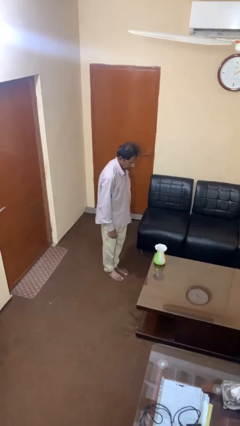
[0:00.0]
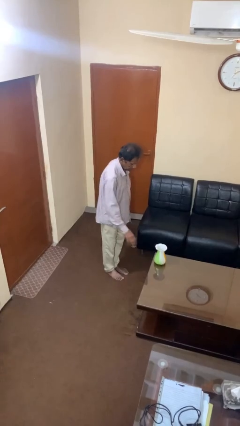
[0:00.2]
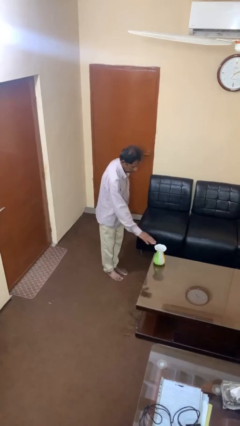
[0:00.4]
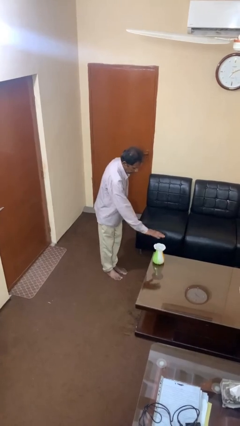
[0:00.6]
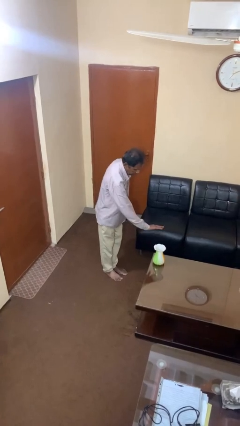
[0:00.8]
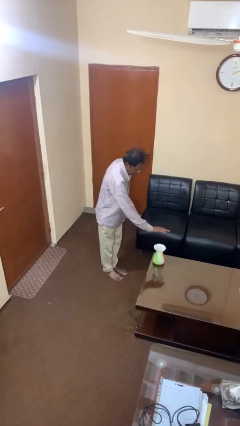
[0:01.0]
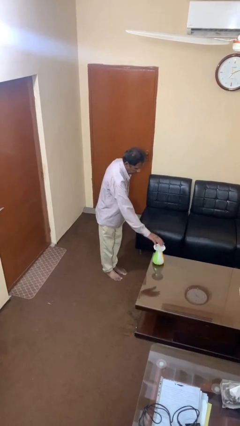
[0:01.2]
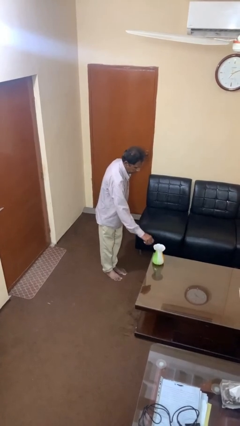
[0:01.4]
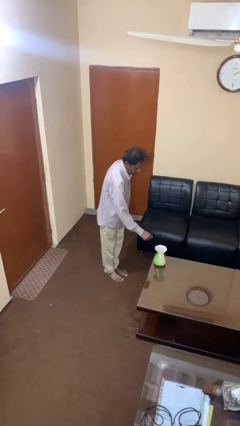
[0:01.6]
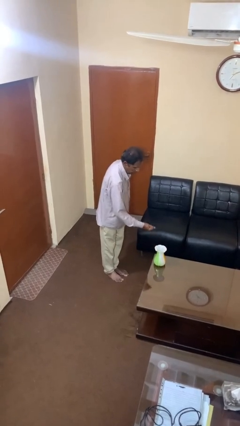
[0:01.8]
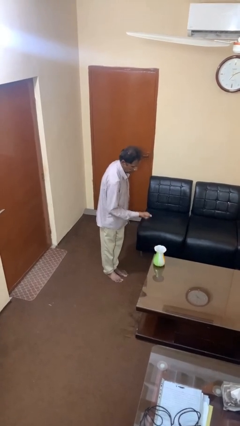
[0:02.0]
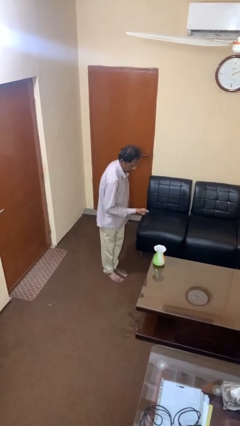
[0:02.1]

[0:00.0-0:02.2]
person waves hand over object

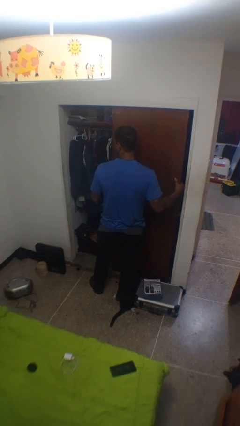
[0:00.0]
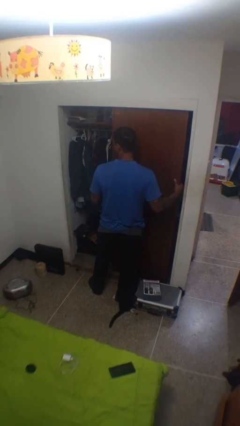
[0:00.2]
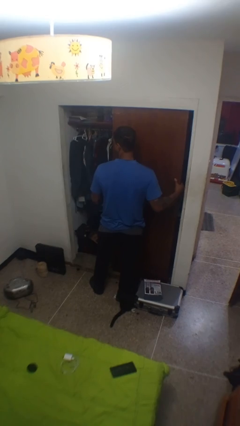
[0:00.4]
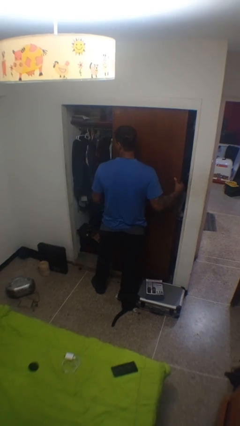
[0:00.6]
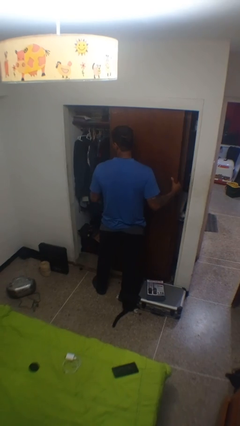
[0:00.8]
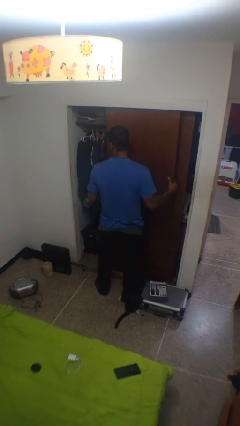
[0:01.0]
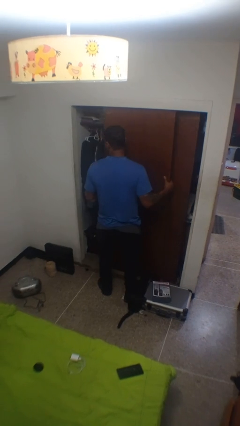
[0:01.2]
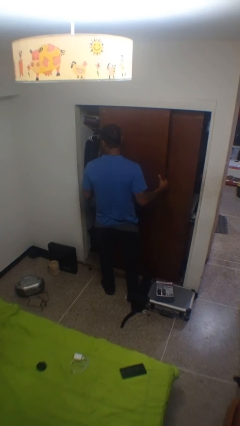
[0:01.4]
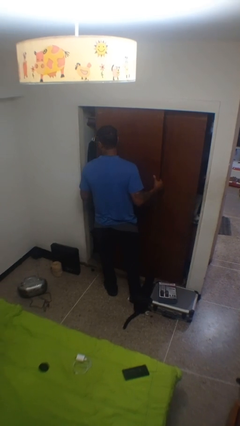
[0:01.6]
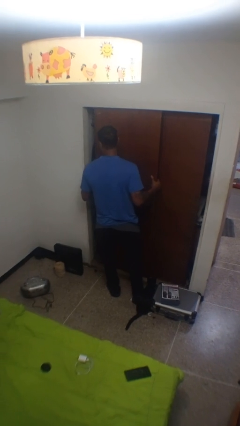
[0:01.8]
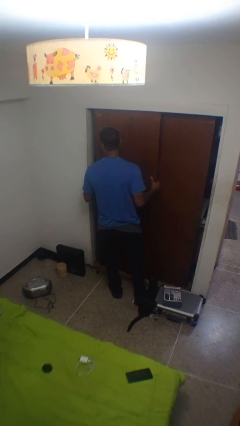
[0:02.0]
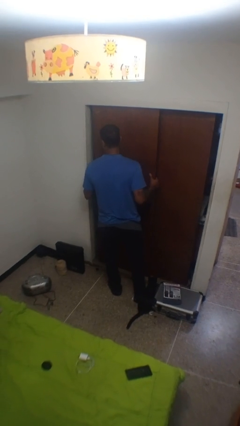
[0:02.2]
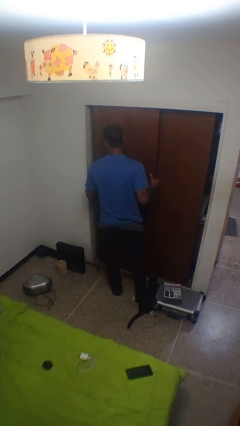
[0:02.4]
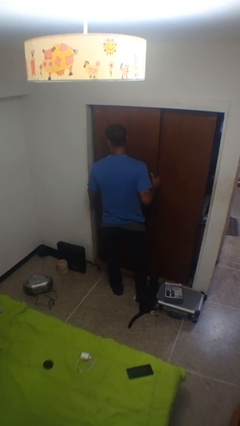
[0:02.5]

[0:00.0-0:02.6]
person closes closet door

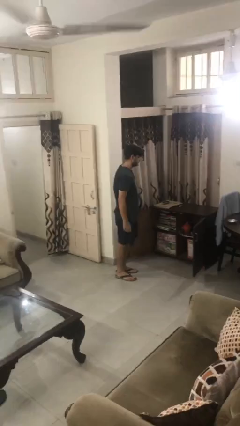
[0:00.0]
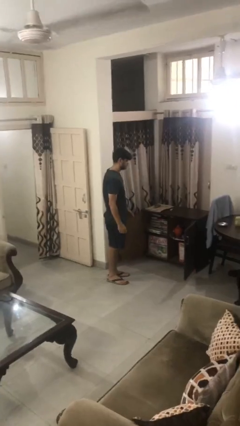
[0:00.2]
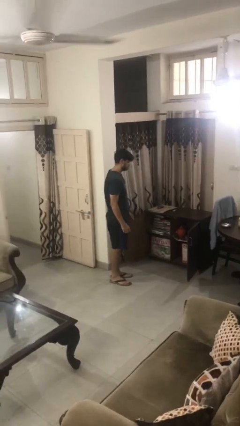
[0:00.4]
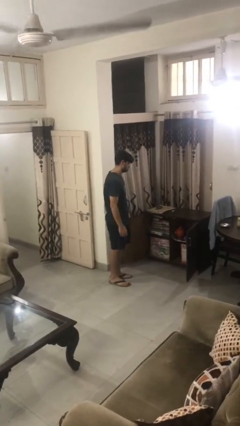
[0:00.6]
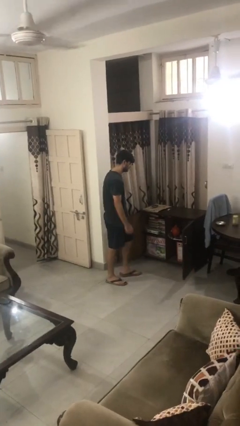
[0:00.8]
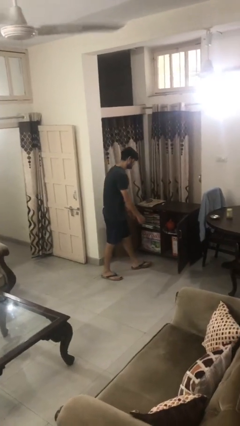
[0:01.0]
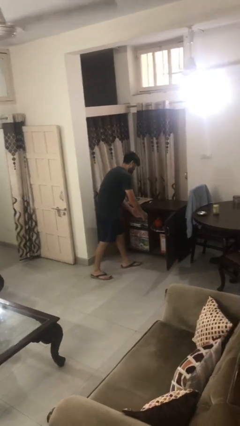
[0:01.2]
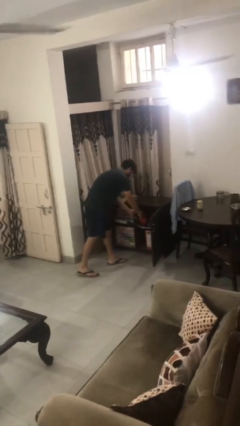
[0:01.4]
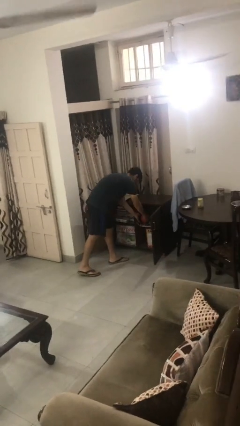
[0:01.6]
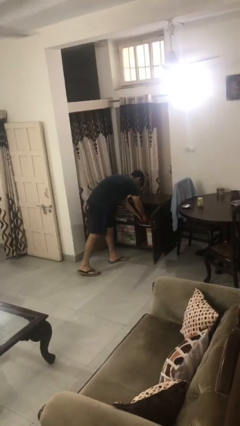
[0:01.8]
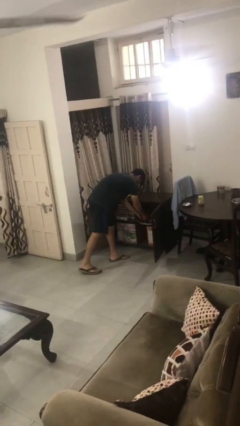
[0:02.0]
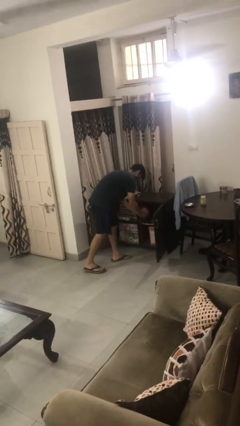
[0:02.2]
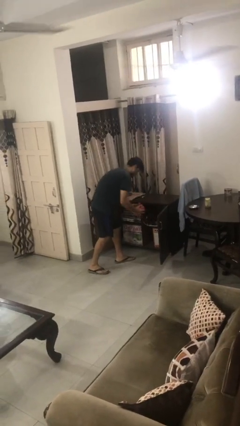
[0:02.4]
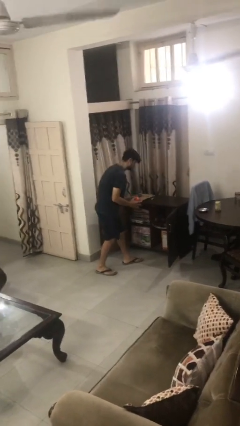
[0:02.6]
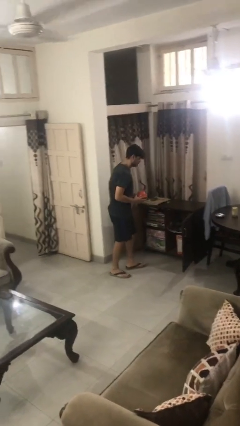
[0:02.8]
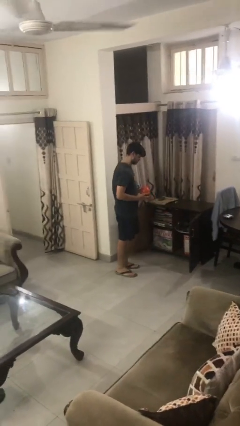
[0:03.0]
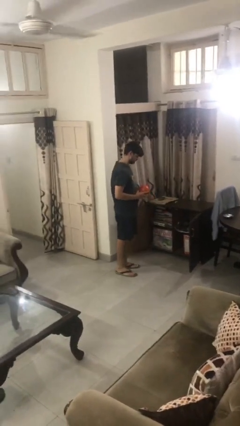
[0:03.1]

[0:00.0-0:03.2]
person picks up object from cabinet

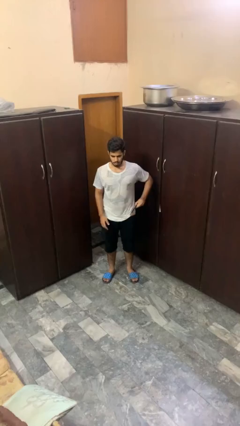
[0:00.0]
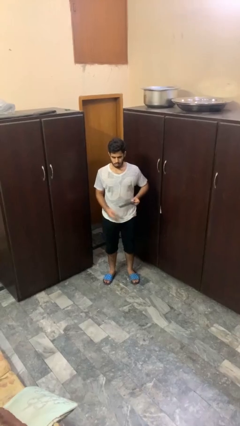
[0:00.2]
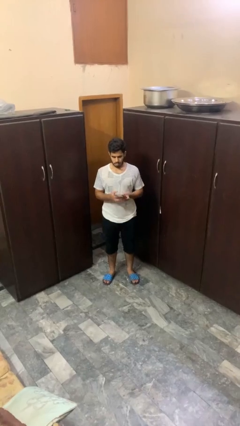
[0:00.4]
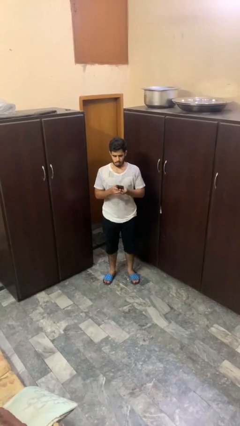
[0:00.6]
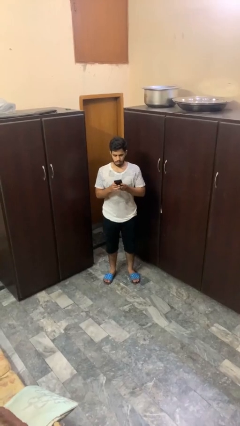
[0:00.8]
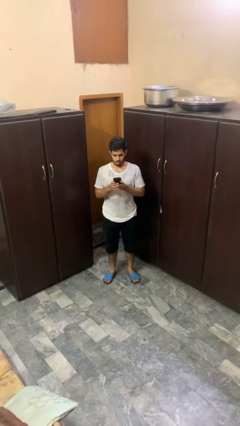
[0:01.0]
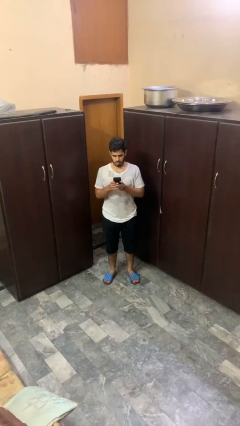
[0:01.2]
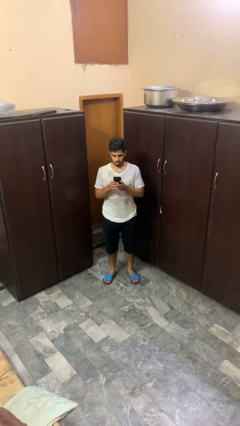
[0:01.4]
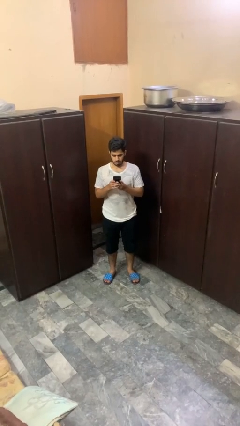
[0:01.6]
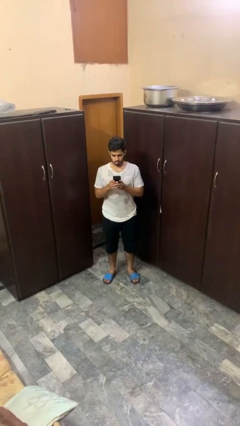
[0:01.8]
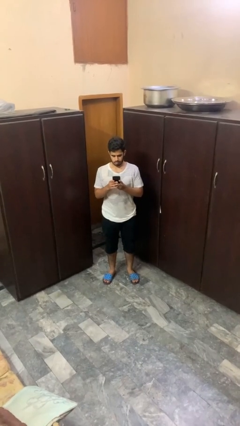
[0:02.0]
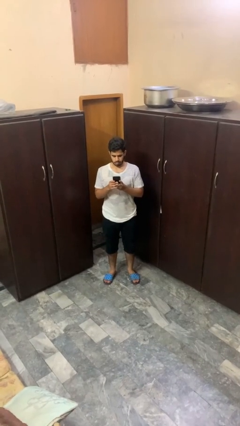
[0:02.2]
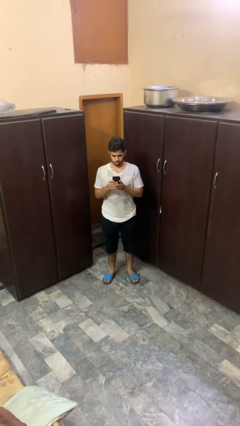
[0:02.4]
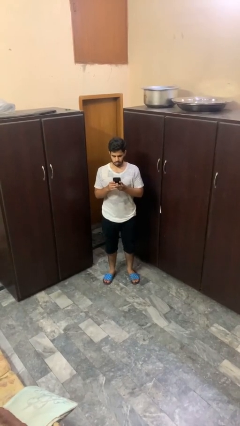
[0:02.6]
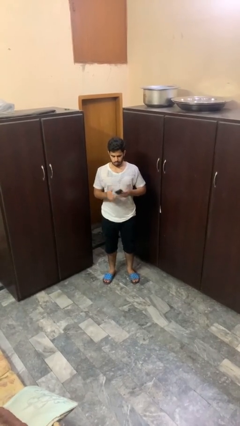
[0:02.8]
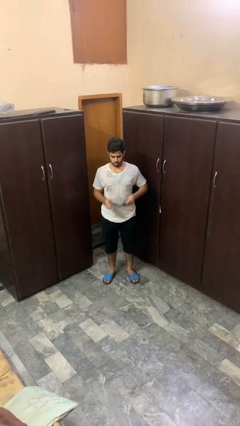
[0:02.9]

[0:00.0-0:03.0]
person takes phone from pocket

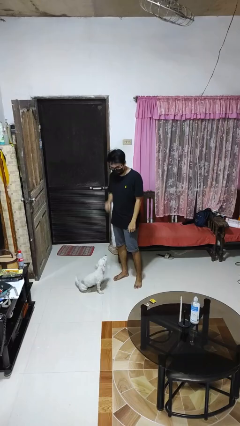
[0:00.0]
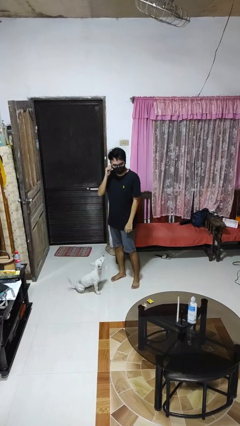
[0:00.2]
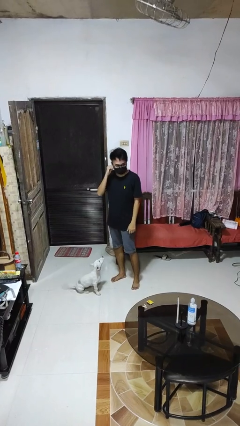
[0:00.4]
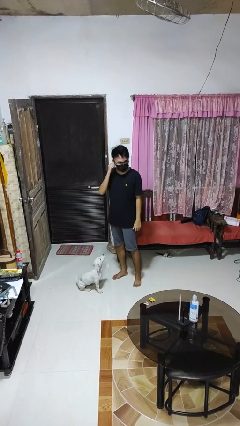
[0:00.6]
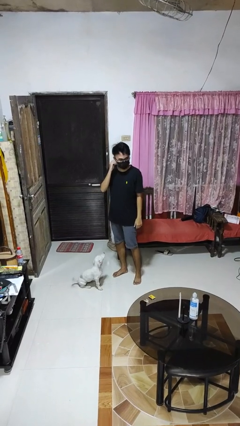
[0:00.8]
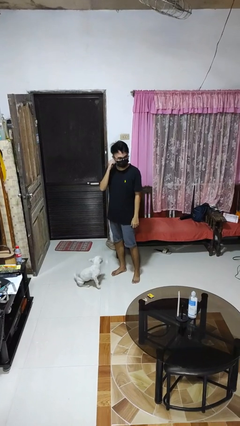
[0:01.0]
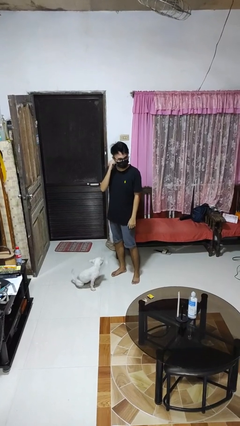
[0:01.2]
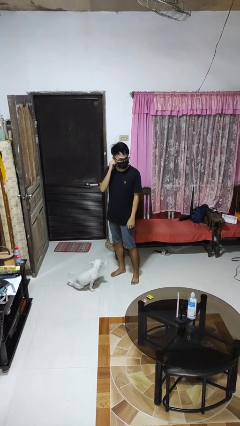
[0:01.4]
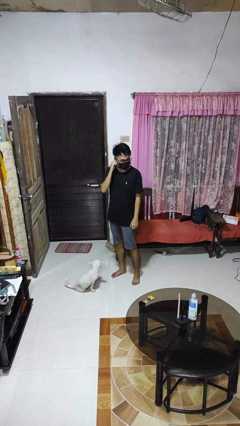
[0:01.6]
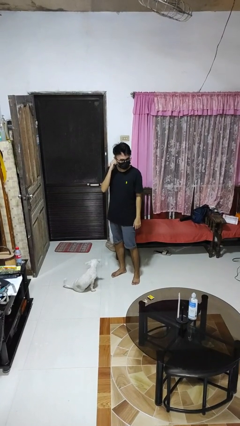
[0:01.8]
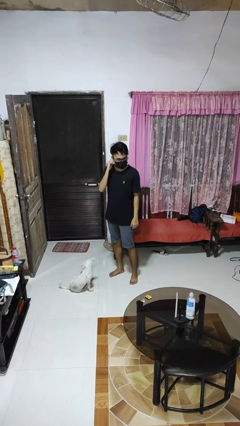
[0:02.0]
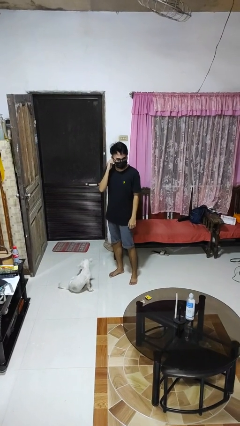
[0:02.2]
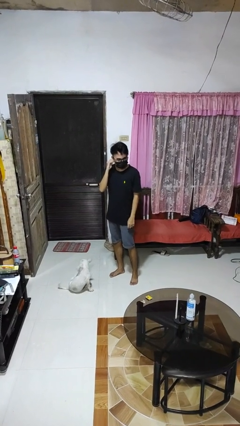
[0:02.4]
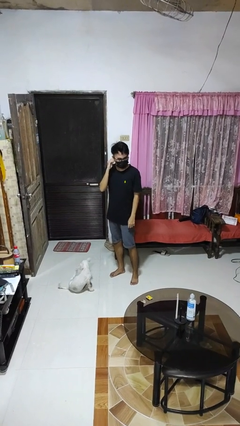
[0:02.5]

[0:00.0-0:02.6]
person touches earlobe

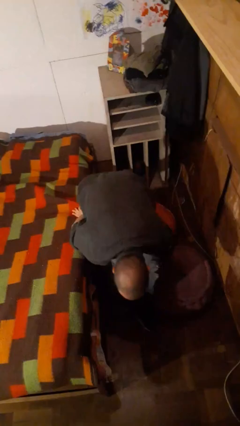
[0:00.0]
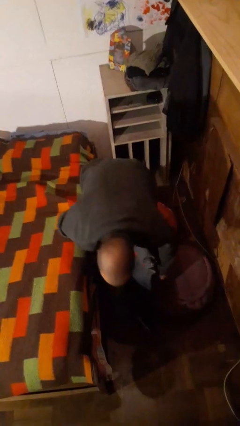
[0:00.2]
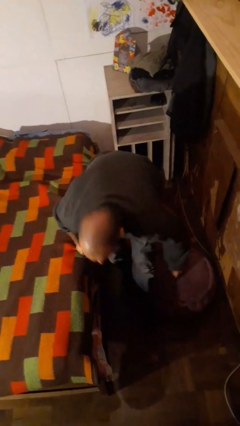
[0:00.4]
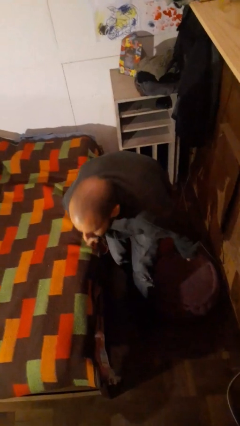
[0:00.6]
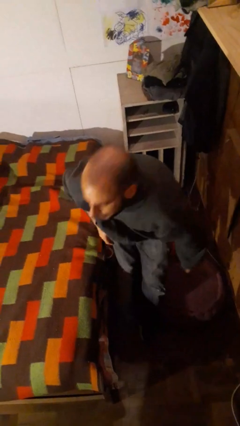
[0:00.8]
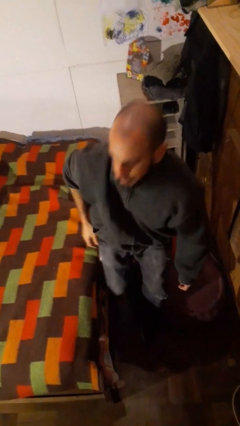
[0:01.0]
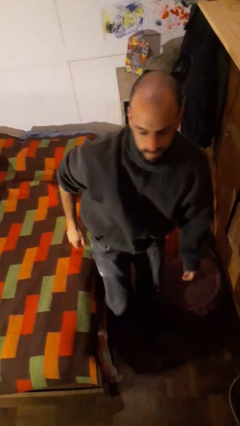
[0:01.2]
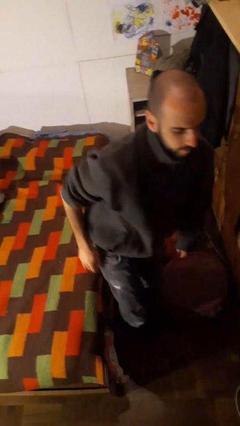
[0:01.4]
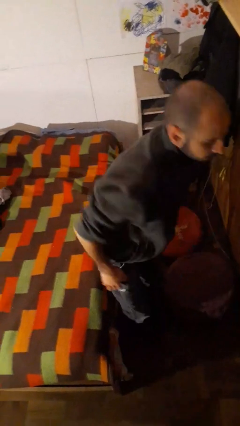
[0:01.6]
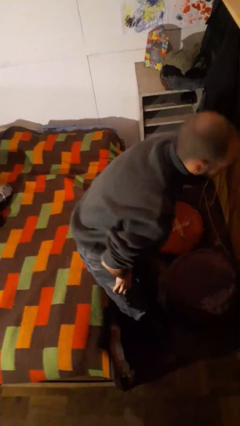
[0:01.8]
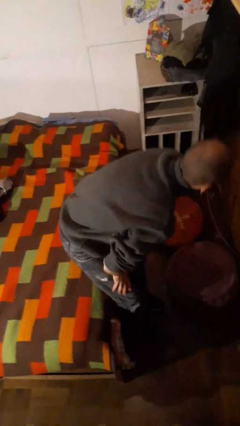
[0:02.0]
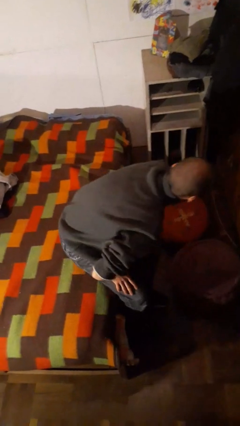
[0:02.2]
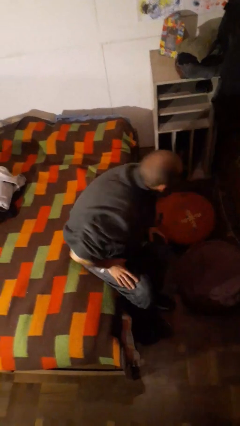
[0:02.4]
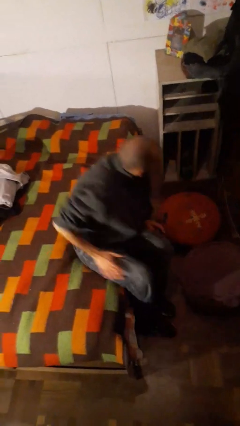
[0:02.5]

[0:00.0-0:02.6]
person stands up from floor

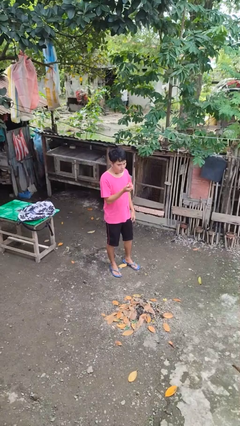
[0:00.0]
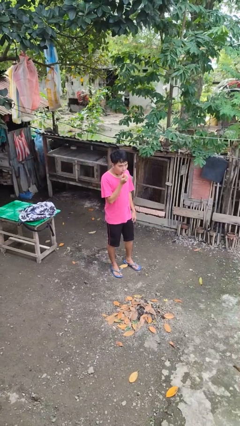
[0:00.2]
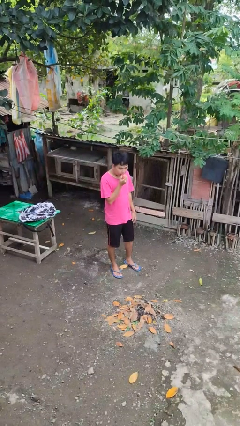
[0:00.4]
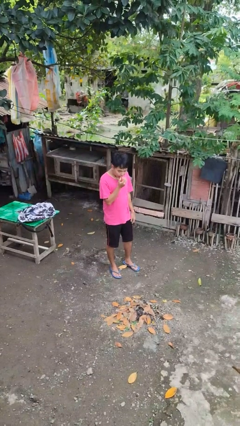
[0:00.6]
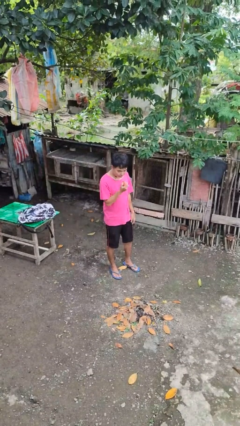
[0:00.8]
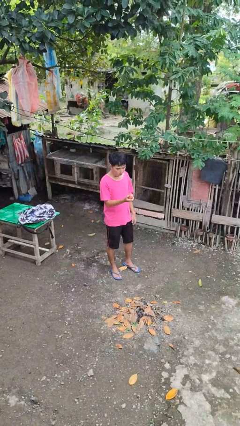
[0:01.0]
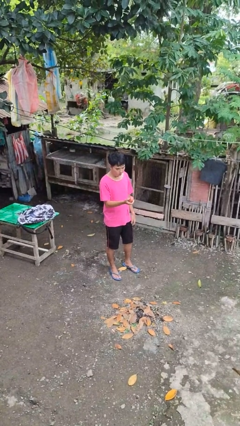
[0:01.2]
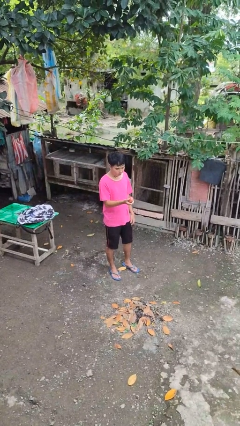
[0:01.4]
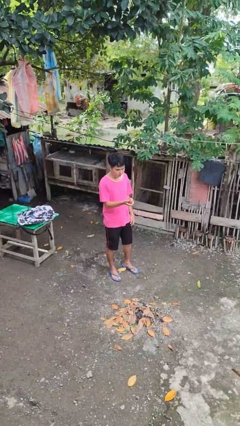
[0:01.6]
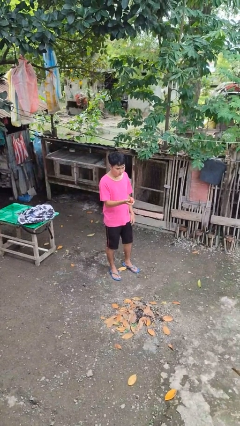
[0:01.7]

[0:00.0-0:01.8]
person eats apple
